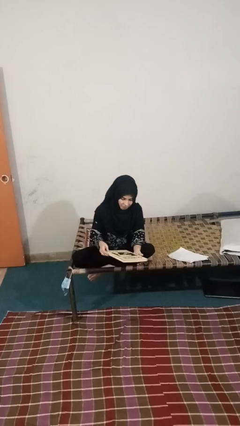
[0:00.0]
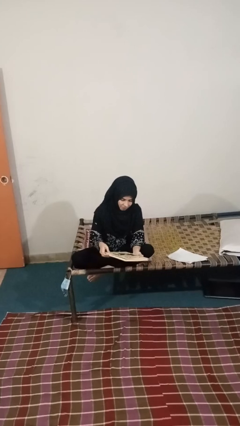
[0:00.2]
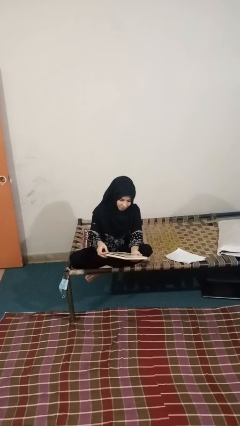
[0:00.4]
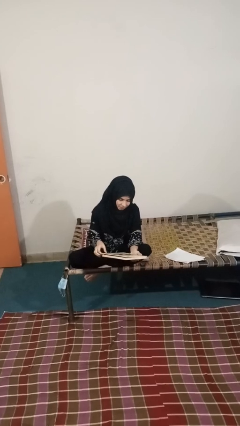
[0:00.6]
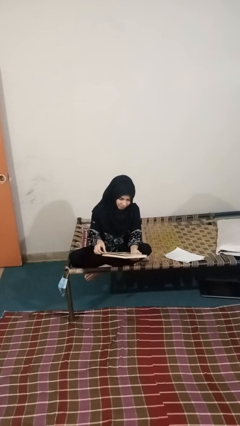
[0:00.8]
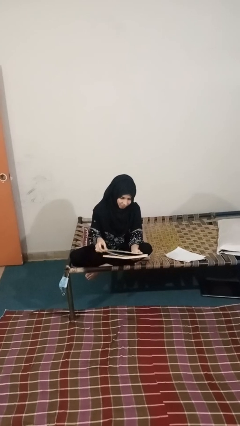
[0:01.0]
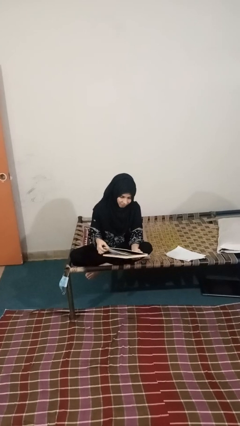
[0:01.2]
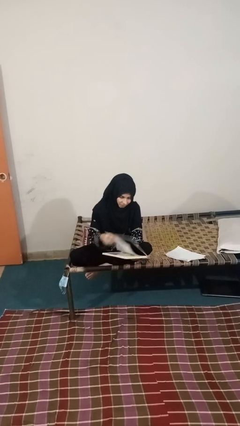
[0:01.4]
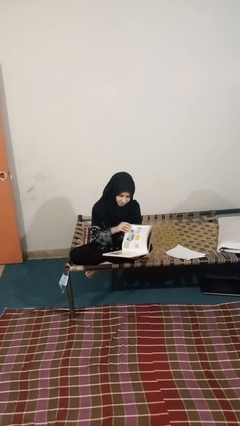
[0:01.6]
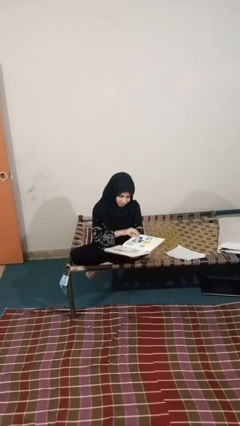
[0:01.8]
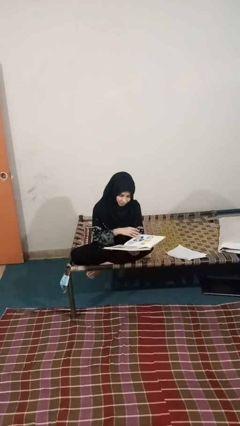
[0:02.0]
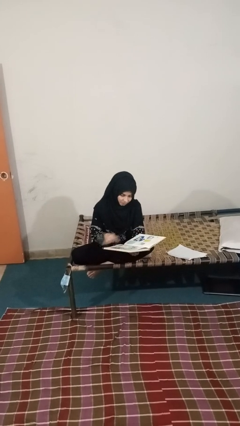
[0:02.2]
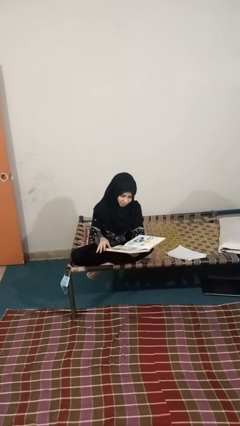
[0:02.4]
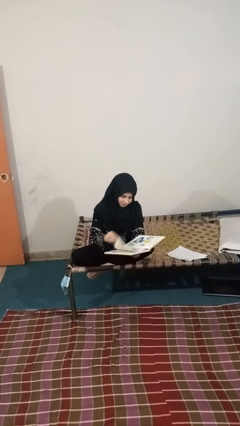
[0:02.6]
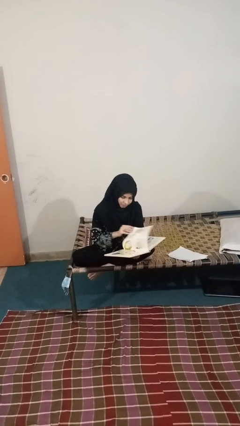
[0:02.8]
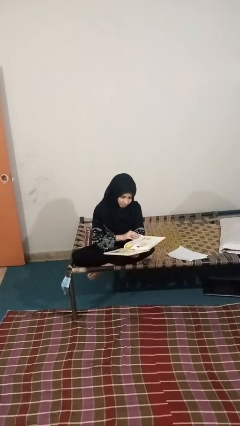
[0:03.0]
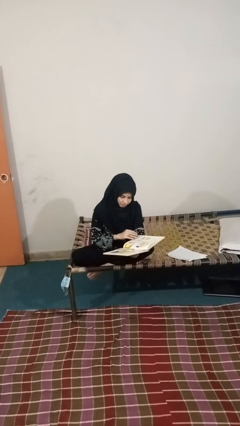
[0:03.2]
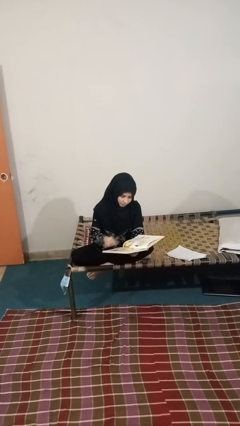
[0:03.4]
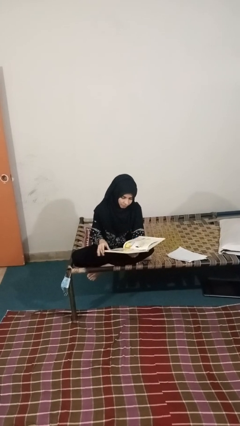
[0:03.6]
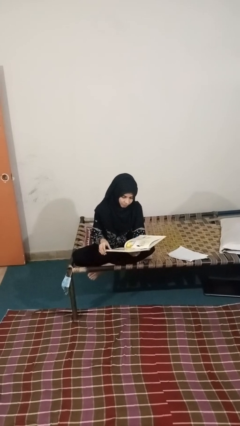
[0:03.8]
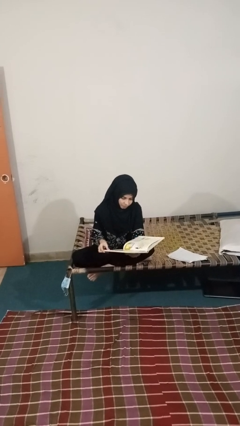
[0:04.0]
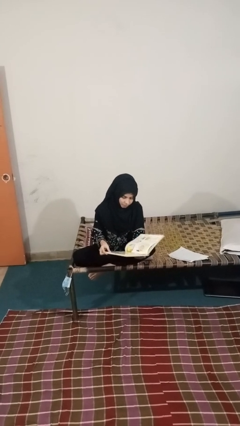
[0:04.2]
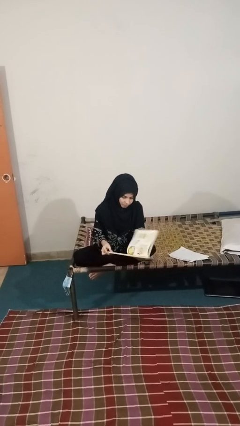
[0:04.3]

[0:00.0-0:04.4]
person reads magazine

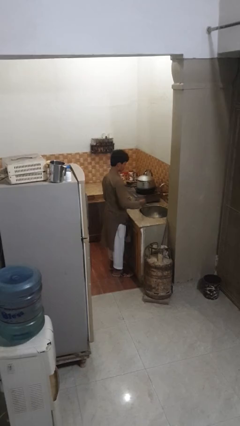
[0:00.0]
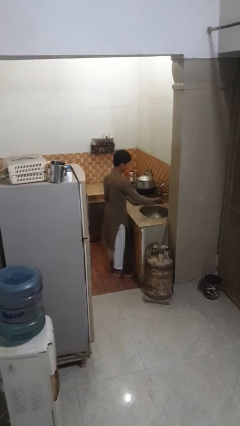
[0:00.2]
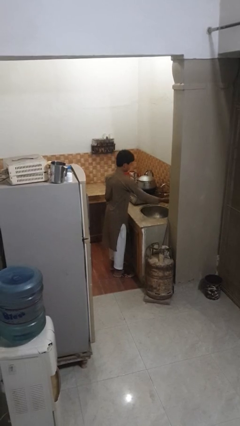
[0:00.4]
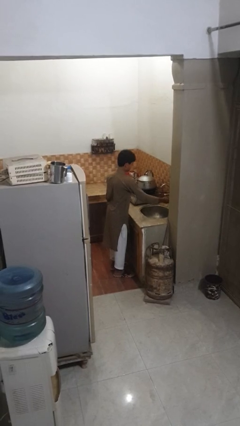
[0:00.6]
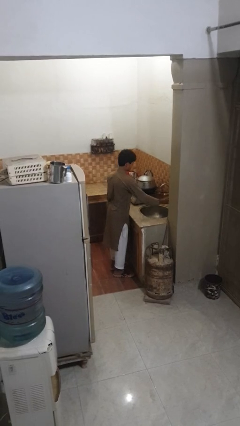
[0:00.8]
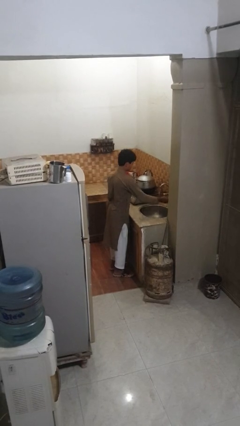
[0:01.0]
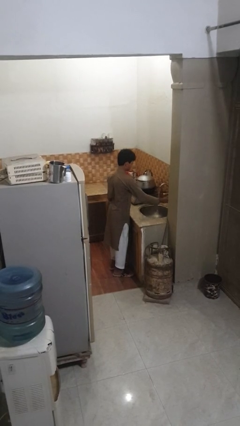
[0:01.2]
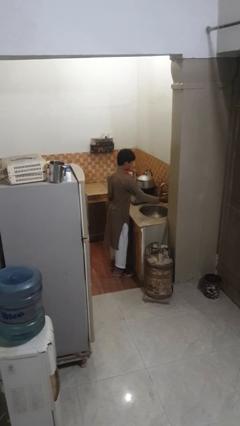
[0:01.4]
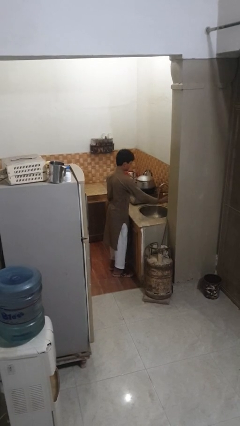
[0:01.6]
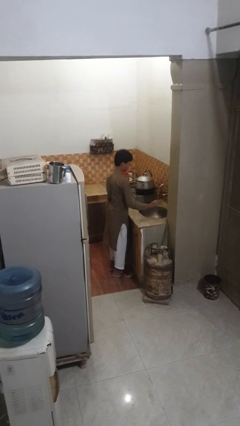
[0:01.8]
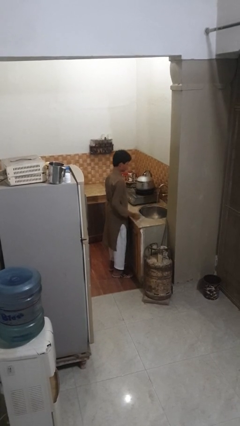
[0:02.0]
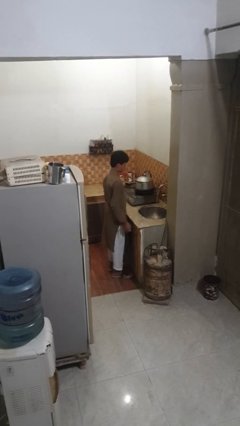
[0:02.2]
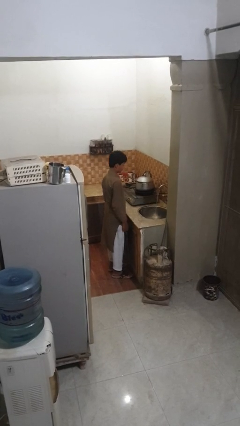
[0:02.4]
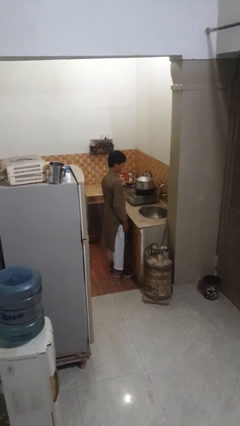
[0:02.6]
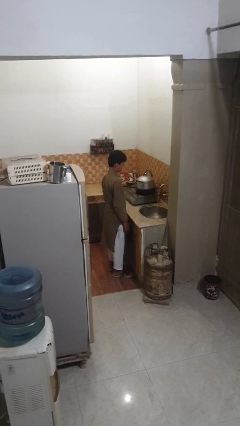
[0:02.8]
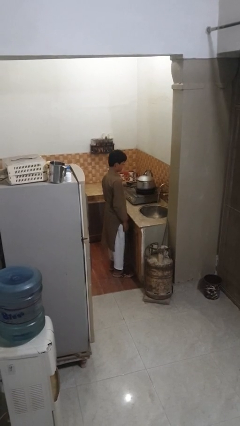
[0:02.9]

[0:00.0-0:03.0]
person turns on faucet

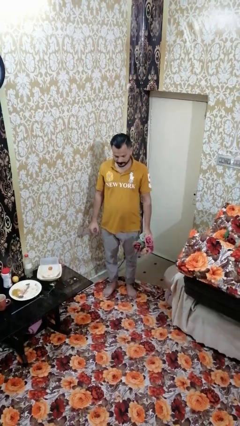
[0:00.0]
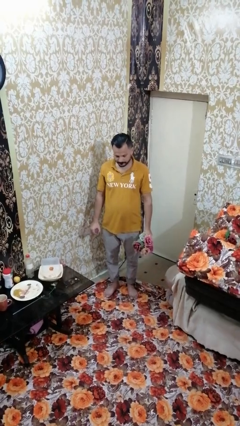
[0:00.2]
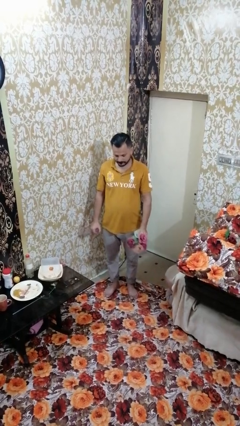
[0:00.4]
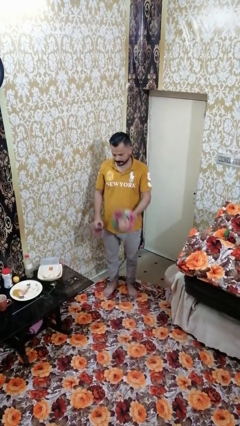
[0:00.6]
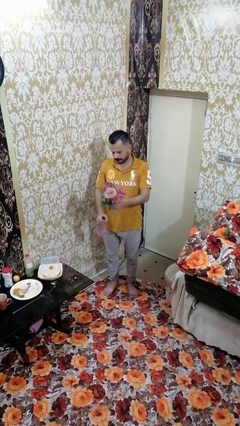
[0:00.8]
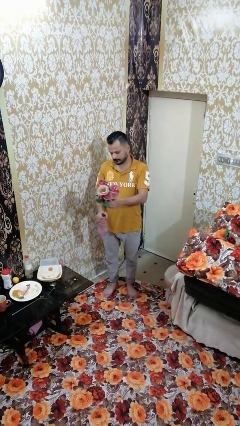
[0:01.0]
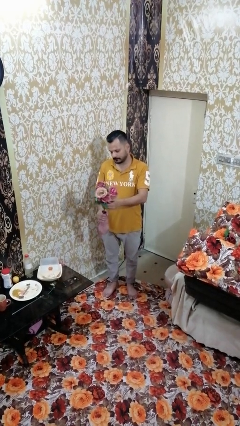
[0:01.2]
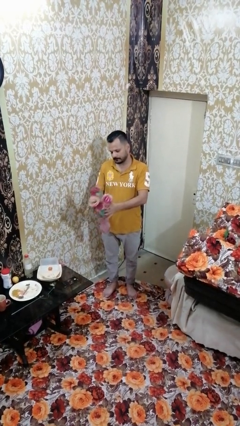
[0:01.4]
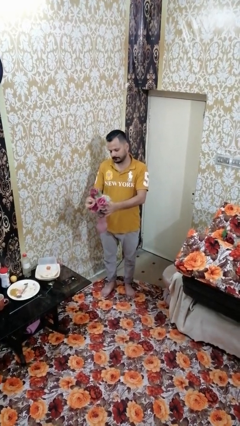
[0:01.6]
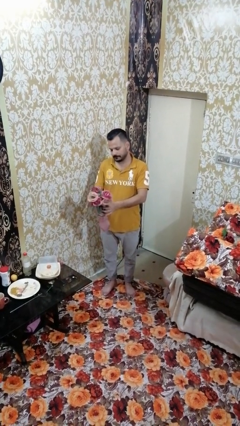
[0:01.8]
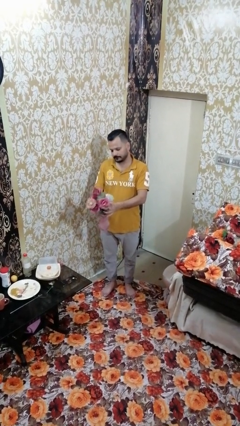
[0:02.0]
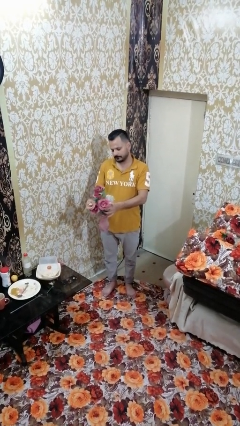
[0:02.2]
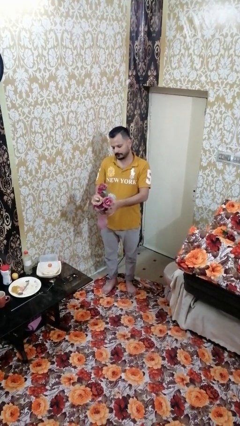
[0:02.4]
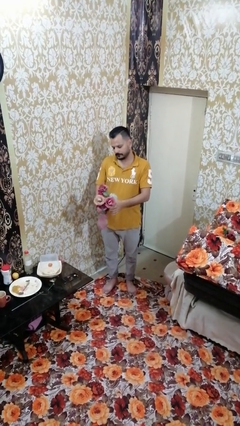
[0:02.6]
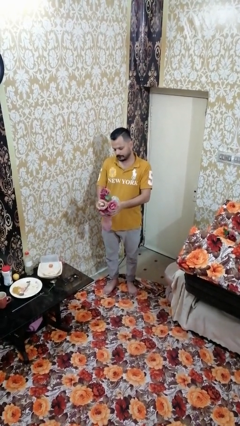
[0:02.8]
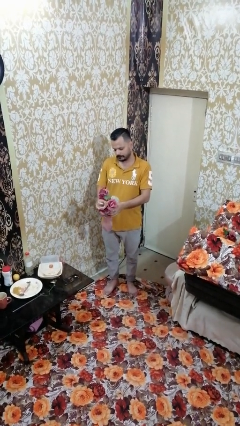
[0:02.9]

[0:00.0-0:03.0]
person arranges flowers in vase

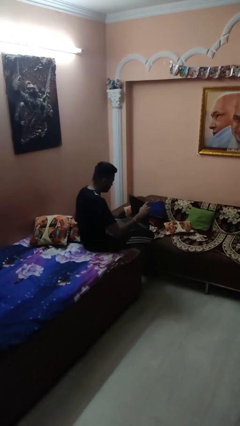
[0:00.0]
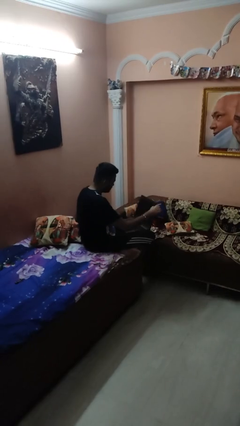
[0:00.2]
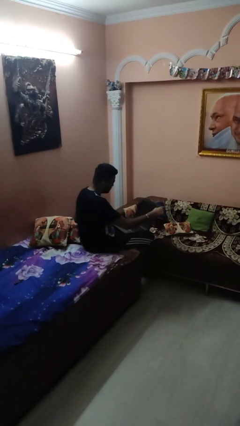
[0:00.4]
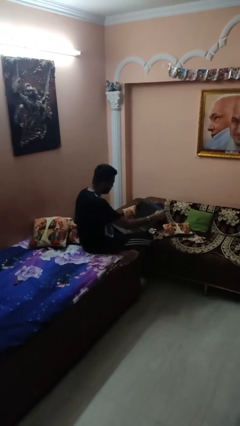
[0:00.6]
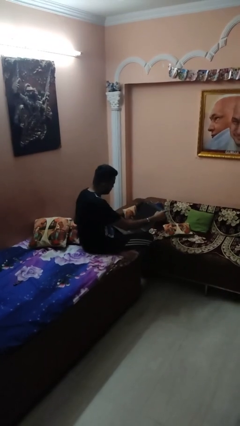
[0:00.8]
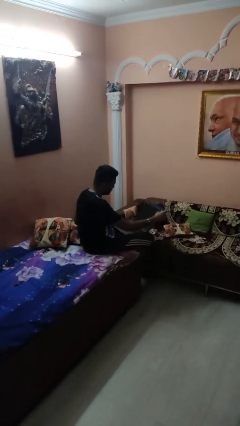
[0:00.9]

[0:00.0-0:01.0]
person opens laptop

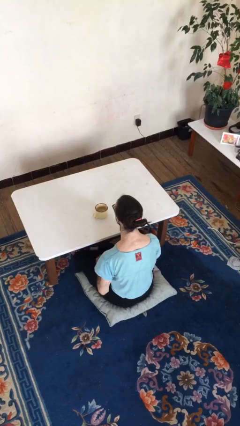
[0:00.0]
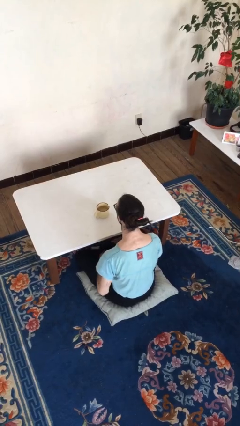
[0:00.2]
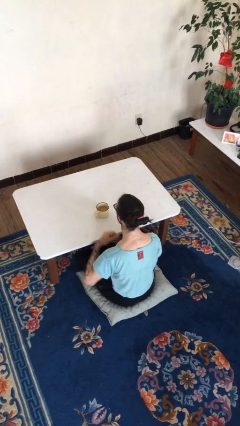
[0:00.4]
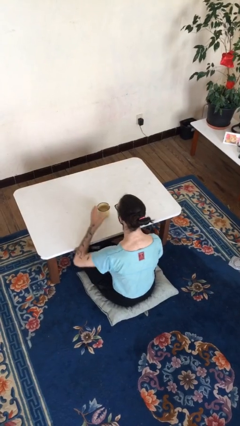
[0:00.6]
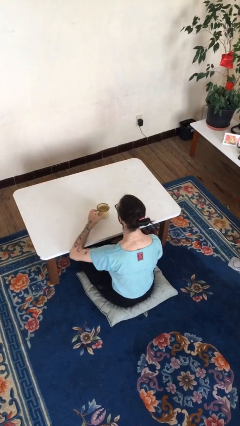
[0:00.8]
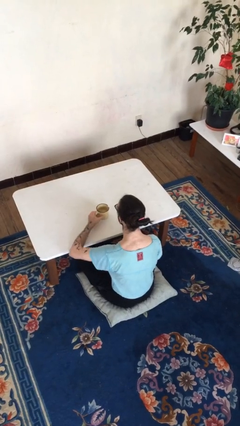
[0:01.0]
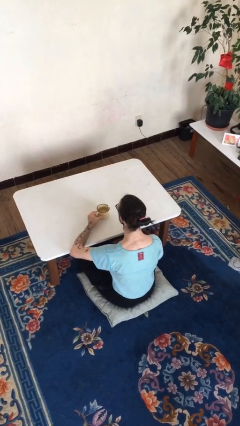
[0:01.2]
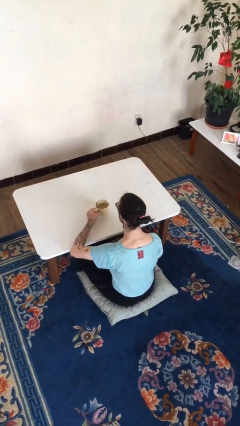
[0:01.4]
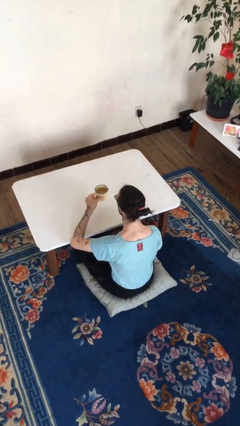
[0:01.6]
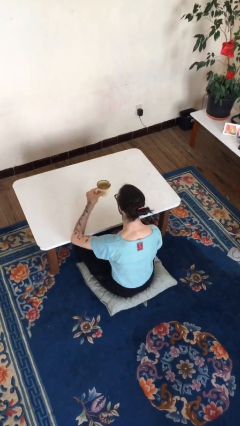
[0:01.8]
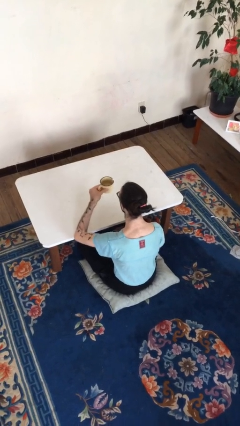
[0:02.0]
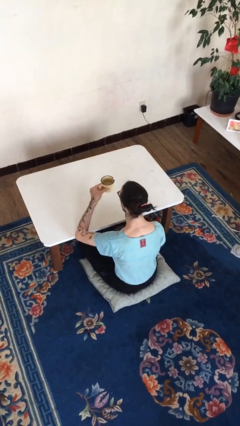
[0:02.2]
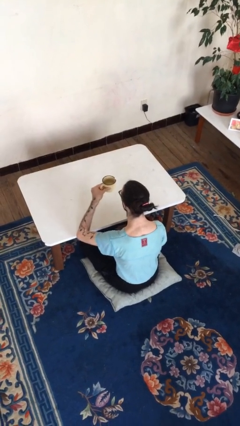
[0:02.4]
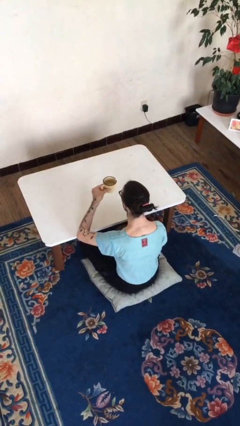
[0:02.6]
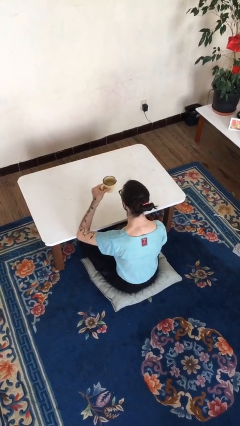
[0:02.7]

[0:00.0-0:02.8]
person picks up object from table

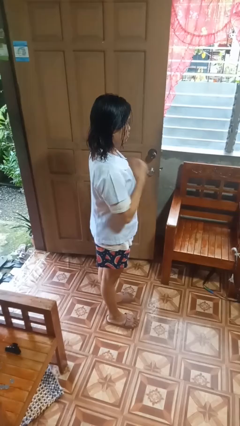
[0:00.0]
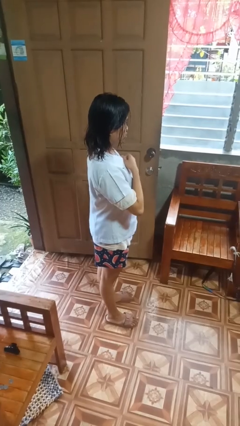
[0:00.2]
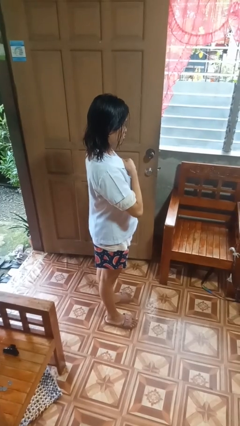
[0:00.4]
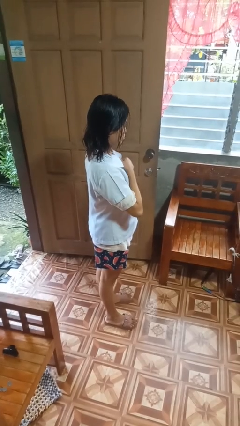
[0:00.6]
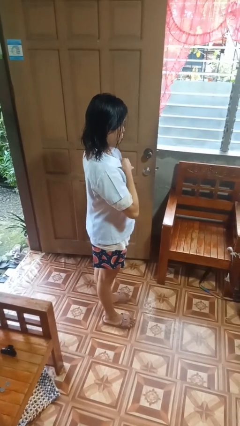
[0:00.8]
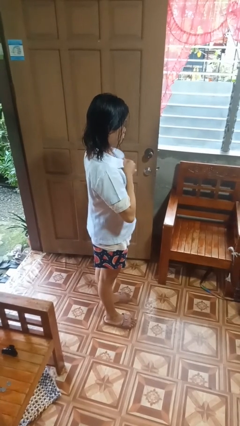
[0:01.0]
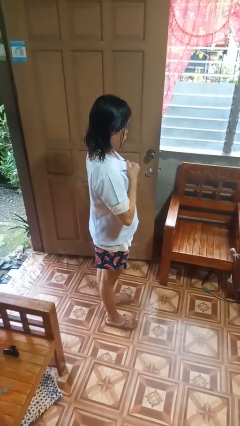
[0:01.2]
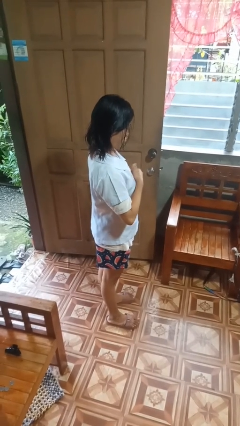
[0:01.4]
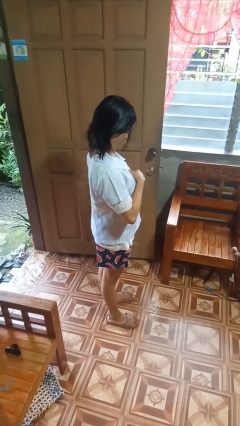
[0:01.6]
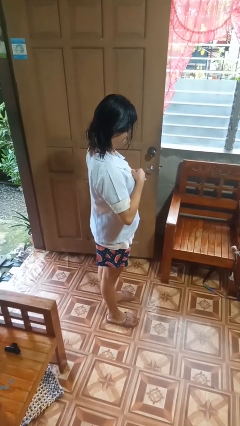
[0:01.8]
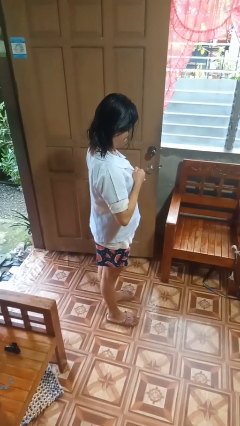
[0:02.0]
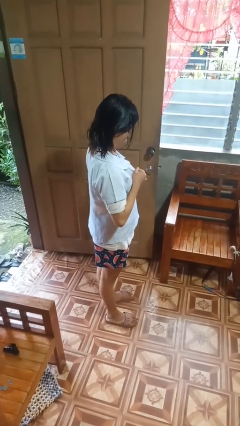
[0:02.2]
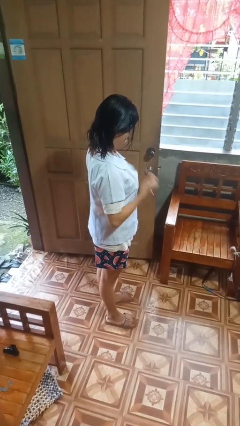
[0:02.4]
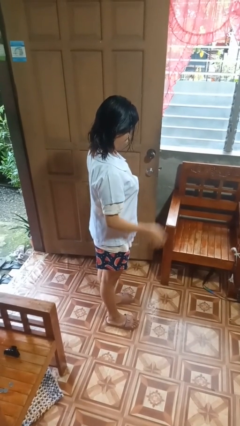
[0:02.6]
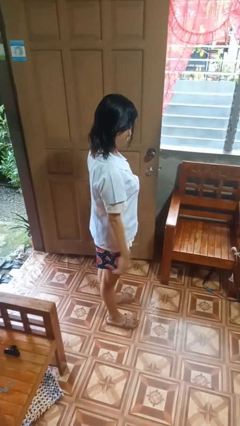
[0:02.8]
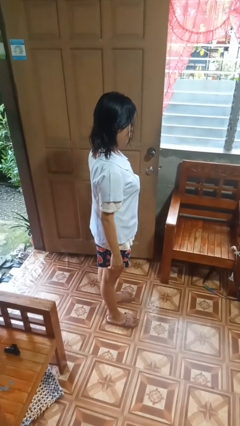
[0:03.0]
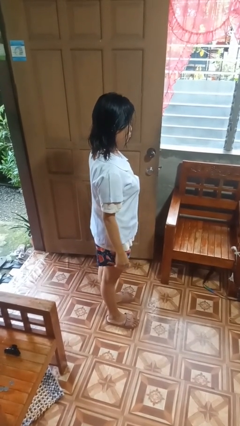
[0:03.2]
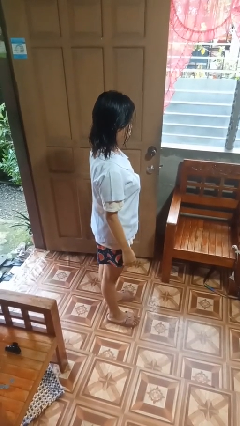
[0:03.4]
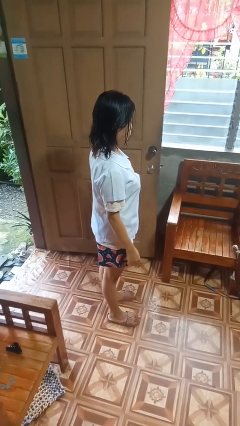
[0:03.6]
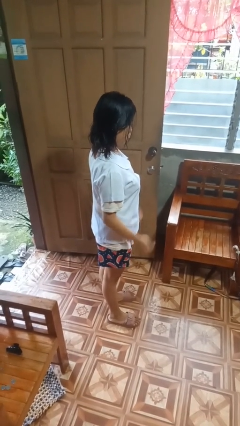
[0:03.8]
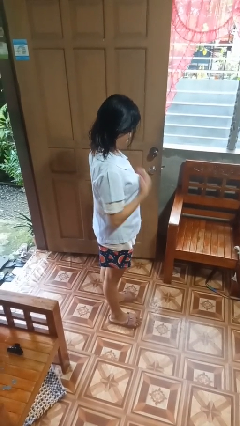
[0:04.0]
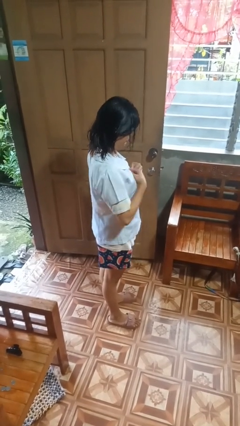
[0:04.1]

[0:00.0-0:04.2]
person unbuttons shirt
